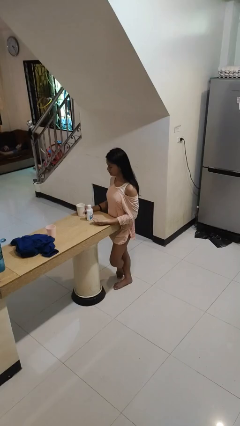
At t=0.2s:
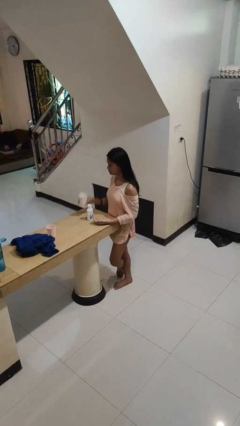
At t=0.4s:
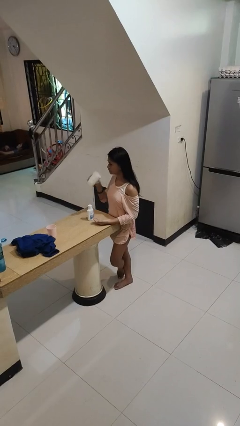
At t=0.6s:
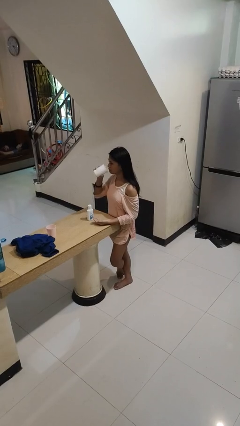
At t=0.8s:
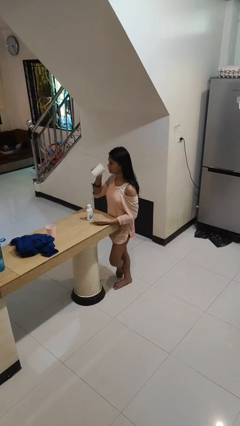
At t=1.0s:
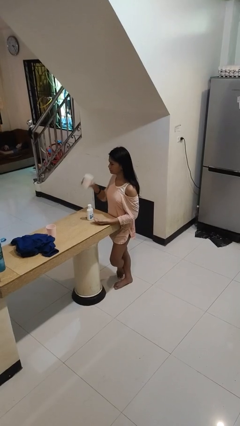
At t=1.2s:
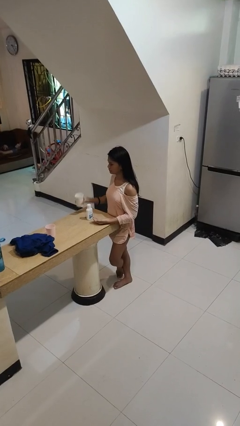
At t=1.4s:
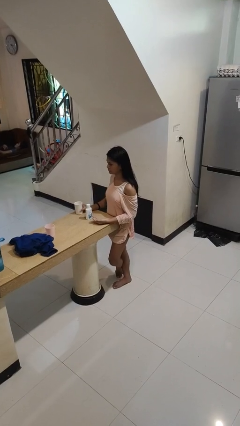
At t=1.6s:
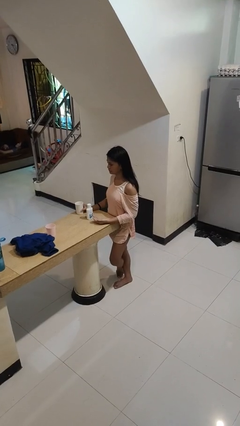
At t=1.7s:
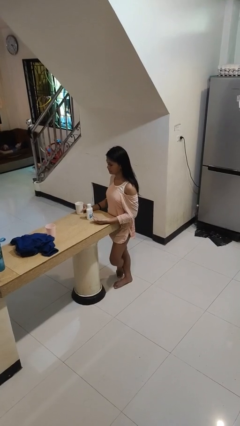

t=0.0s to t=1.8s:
person drinks from cup

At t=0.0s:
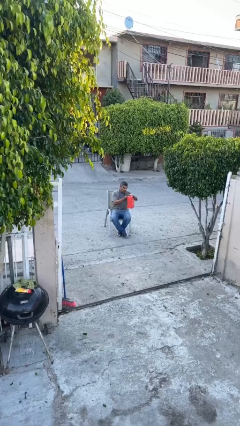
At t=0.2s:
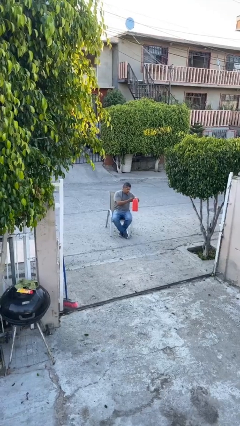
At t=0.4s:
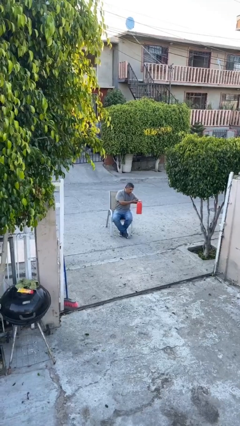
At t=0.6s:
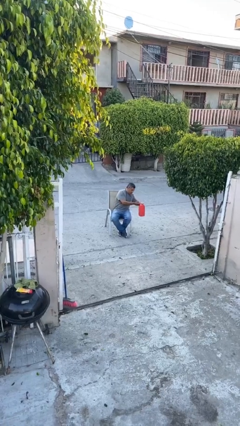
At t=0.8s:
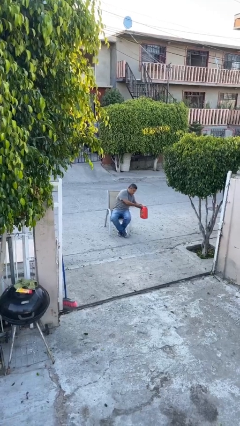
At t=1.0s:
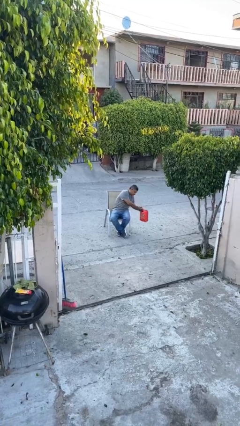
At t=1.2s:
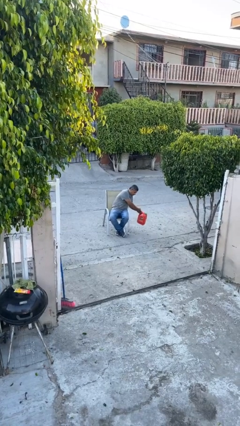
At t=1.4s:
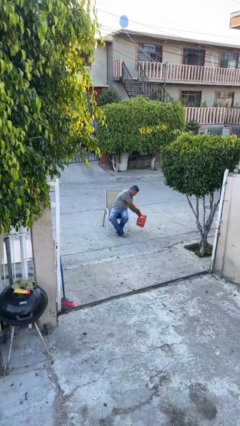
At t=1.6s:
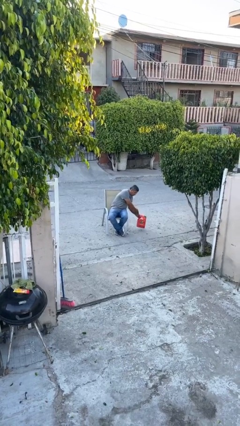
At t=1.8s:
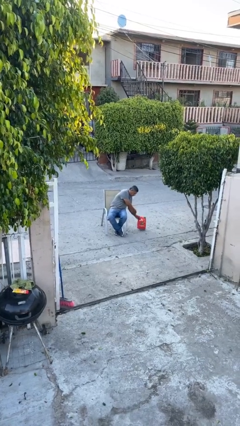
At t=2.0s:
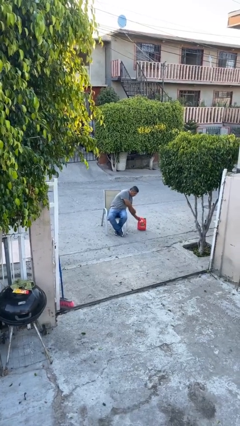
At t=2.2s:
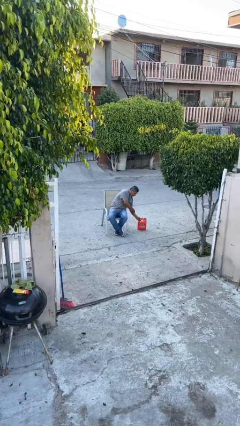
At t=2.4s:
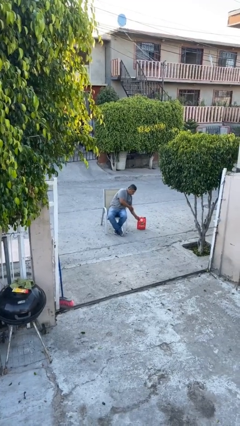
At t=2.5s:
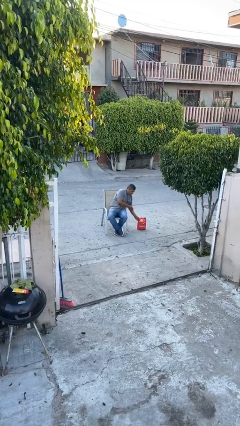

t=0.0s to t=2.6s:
person puts down object on floor

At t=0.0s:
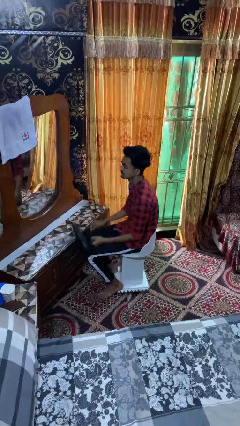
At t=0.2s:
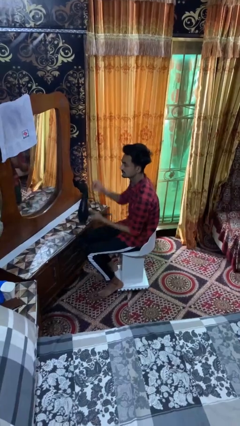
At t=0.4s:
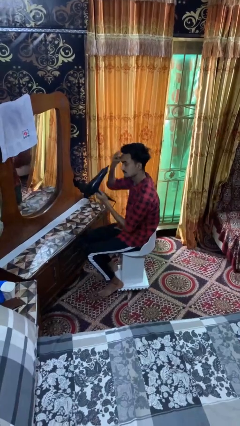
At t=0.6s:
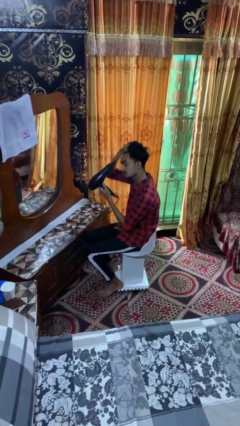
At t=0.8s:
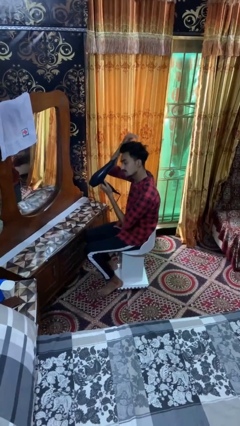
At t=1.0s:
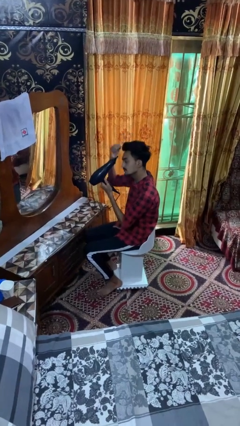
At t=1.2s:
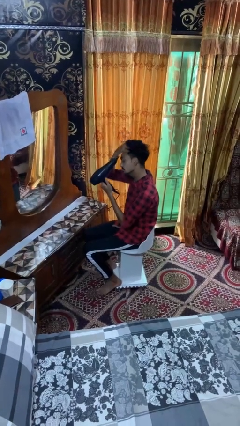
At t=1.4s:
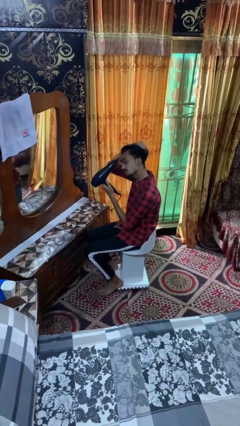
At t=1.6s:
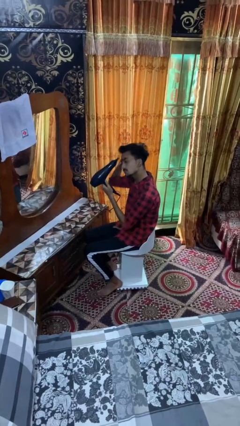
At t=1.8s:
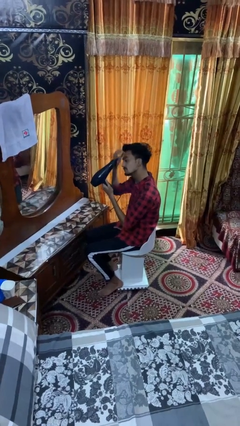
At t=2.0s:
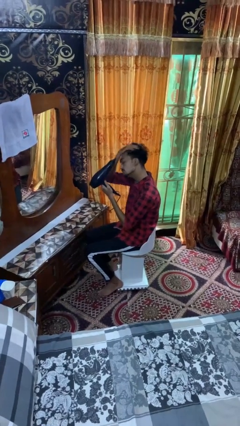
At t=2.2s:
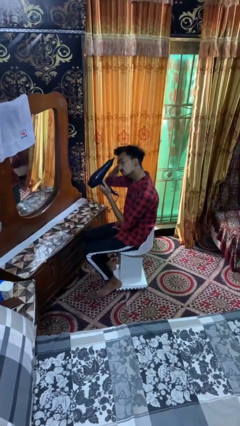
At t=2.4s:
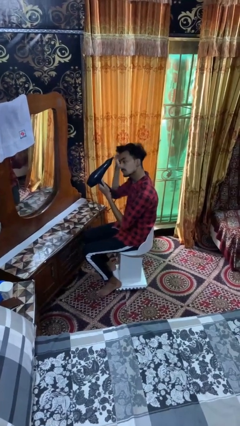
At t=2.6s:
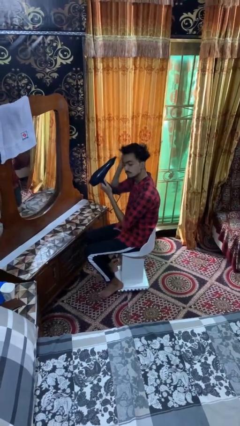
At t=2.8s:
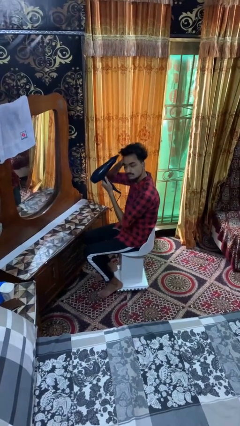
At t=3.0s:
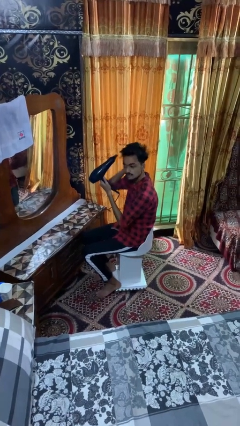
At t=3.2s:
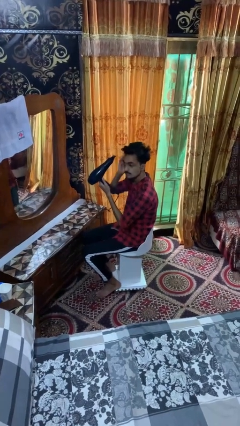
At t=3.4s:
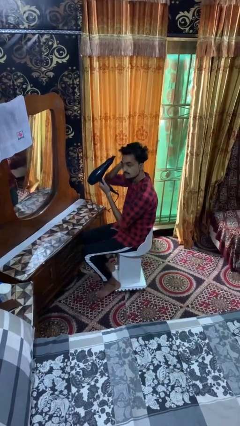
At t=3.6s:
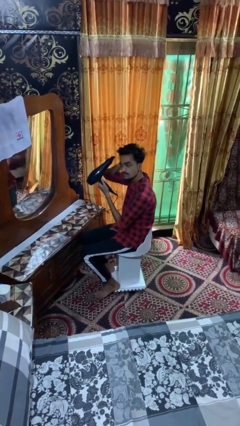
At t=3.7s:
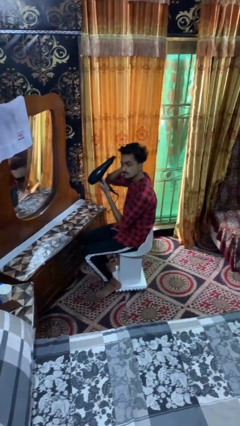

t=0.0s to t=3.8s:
person dries hair with hairdryer

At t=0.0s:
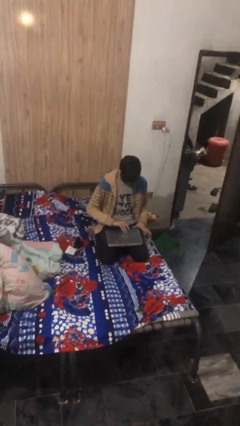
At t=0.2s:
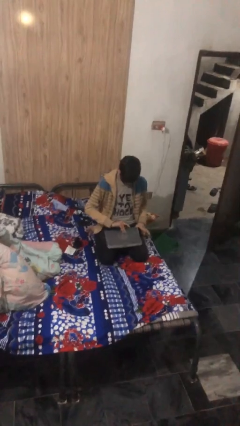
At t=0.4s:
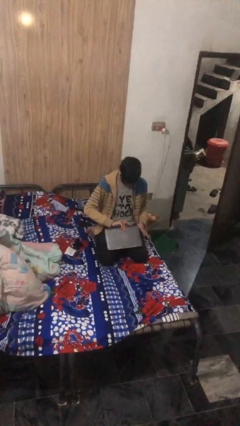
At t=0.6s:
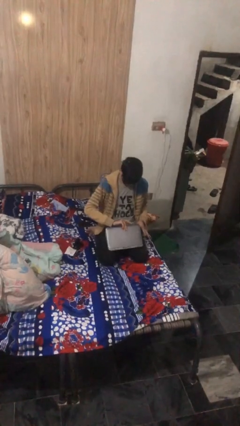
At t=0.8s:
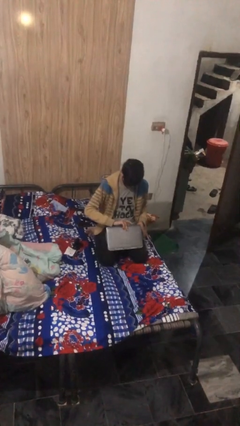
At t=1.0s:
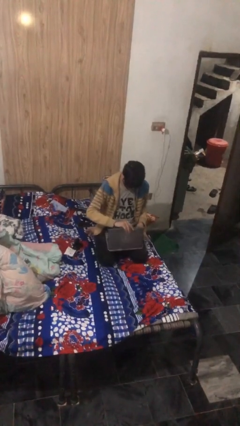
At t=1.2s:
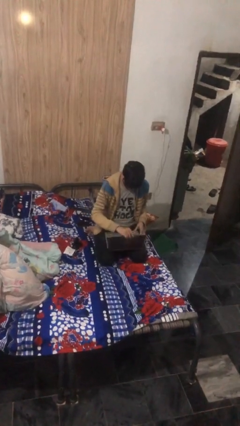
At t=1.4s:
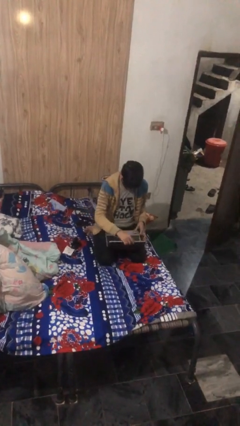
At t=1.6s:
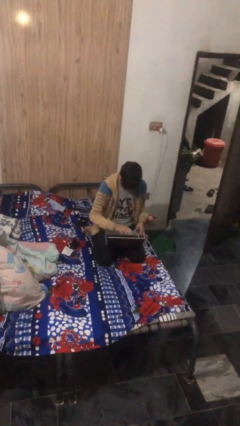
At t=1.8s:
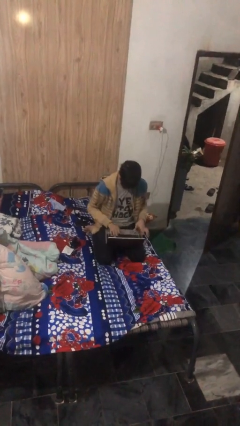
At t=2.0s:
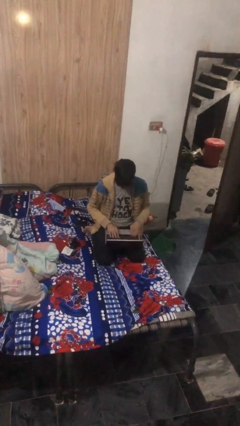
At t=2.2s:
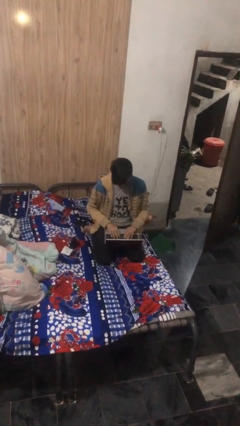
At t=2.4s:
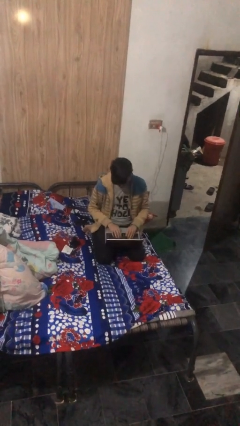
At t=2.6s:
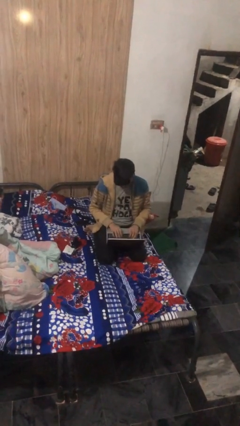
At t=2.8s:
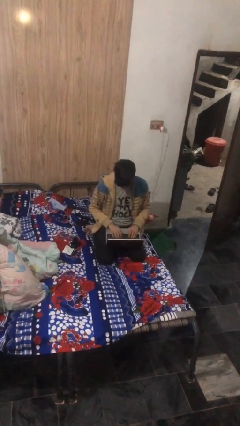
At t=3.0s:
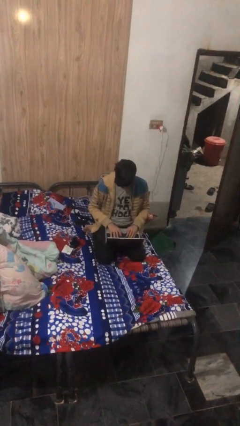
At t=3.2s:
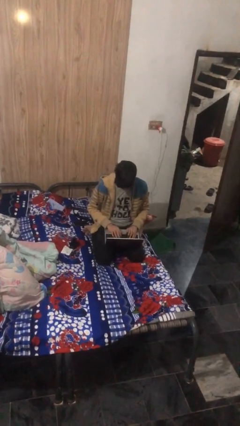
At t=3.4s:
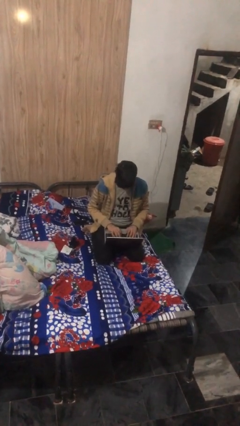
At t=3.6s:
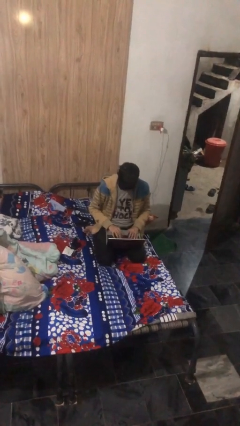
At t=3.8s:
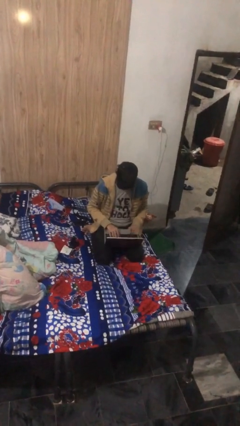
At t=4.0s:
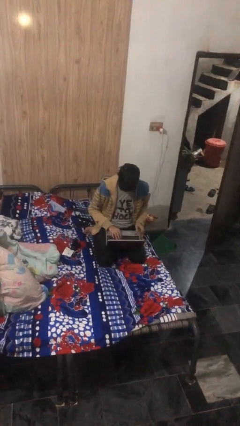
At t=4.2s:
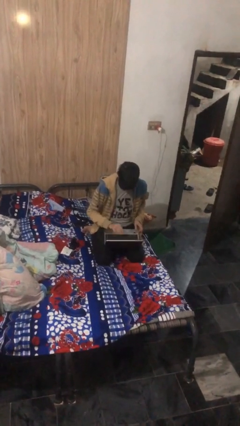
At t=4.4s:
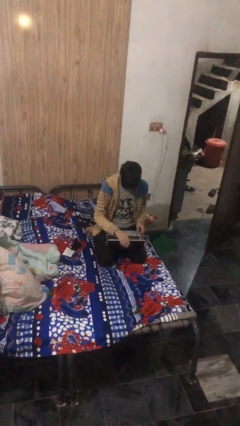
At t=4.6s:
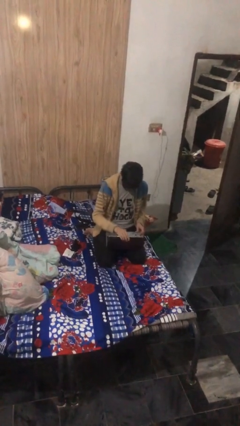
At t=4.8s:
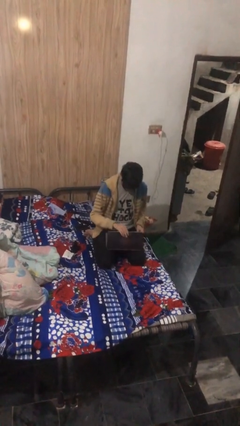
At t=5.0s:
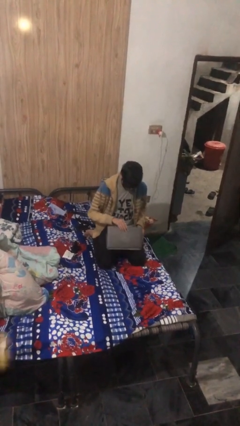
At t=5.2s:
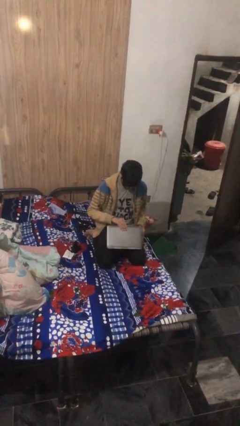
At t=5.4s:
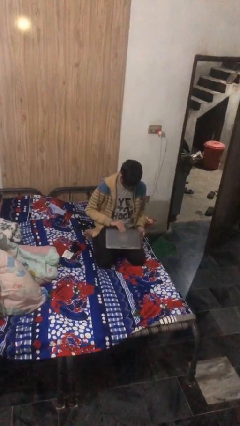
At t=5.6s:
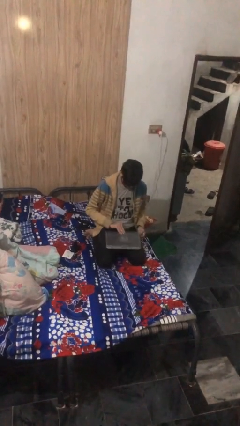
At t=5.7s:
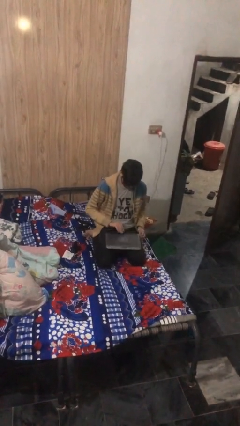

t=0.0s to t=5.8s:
person interacts with laptop

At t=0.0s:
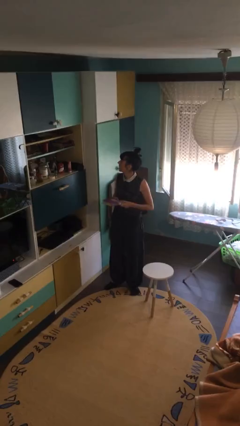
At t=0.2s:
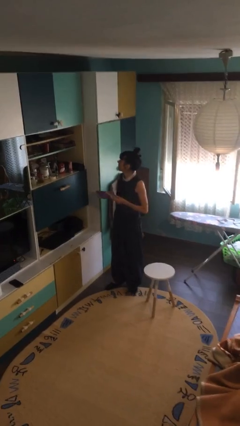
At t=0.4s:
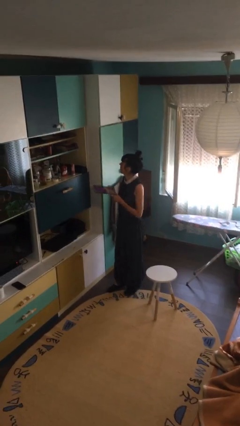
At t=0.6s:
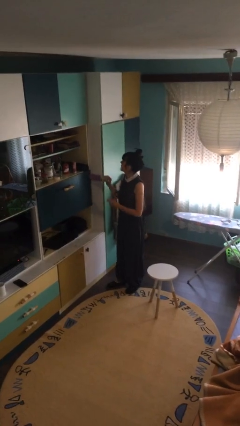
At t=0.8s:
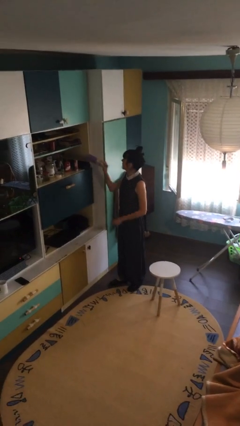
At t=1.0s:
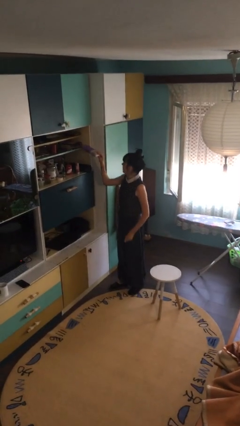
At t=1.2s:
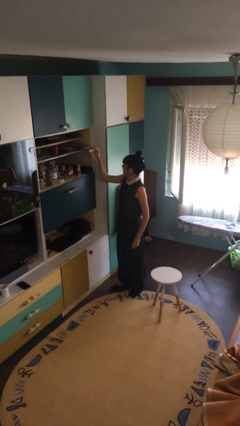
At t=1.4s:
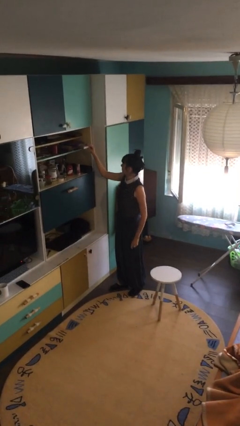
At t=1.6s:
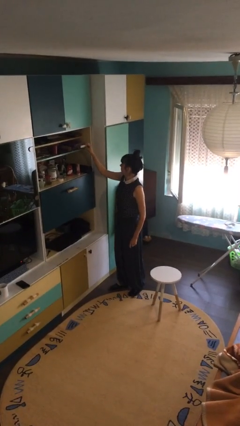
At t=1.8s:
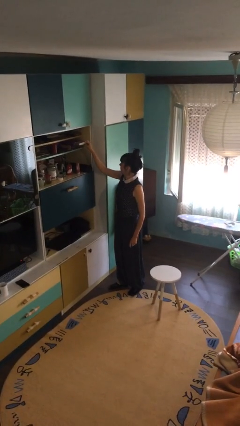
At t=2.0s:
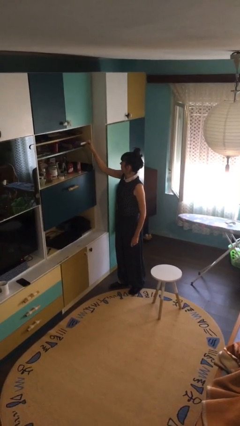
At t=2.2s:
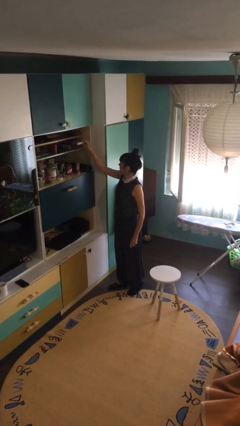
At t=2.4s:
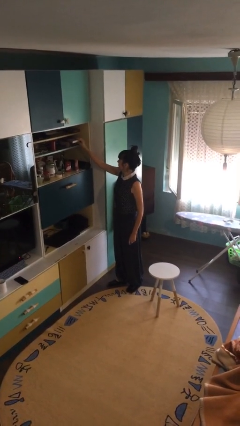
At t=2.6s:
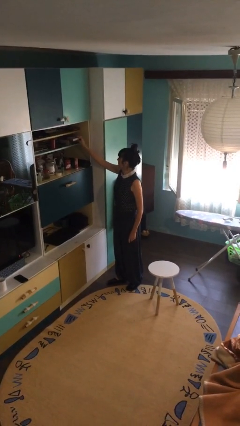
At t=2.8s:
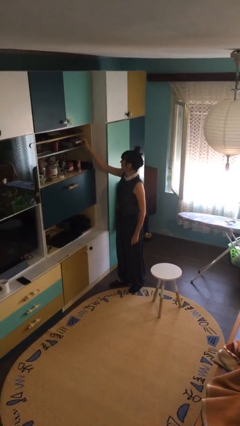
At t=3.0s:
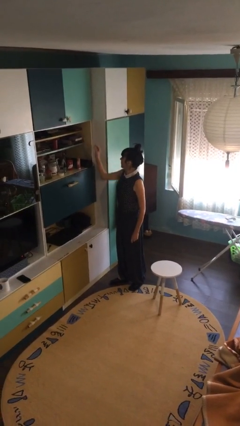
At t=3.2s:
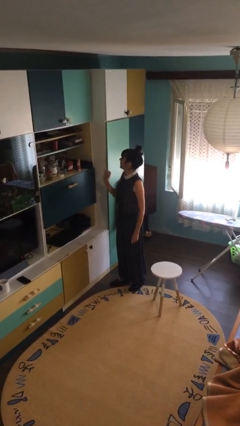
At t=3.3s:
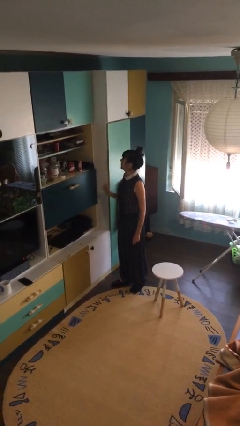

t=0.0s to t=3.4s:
person puts down object on shelf

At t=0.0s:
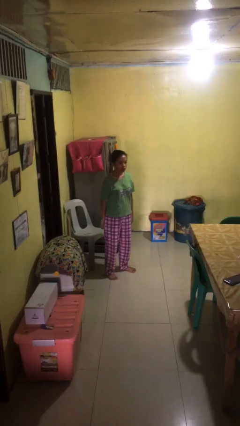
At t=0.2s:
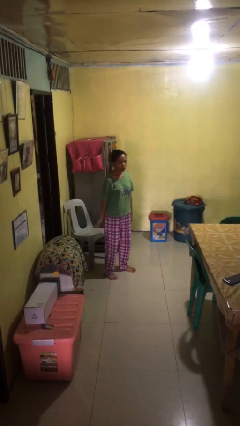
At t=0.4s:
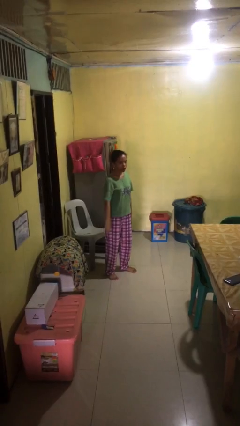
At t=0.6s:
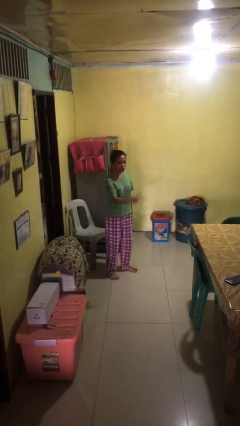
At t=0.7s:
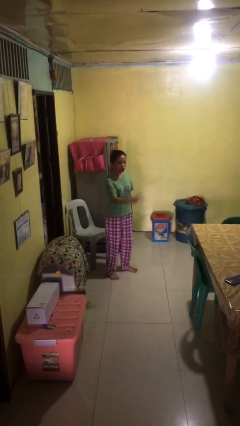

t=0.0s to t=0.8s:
person gestures watch closely
